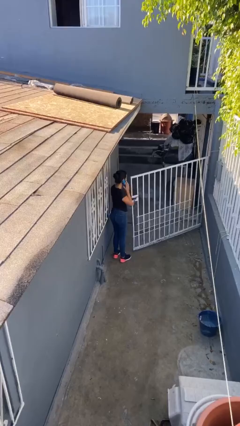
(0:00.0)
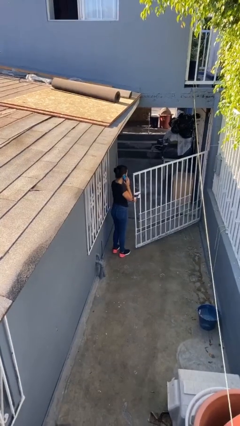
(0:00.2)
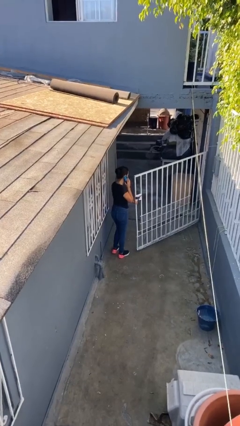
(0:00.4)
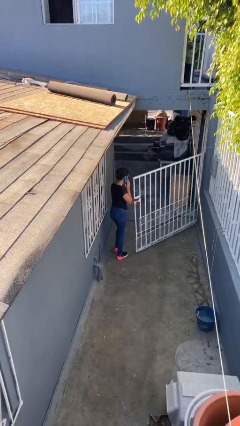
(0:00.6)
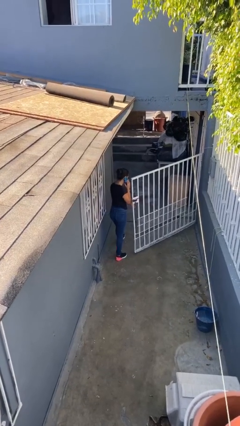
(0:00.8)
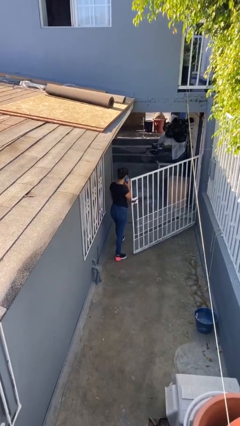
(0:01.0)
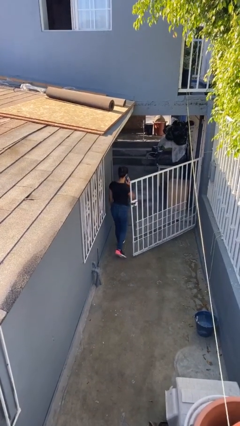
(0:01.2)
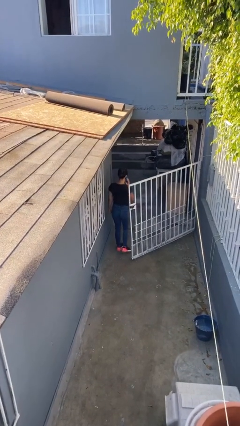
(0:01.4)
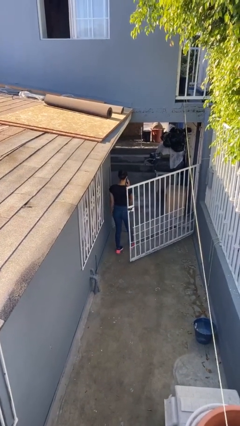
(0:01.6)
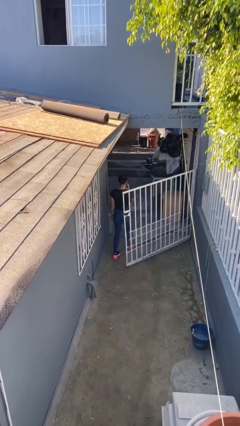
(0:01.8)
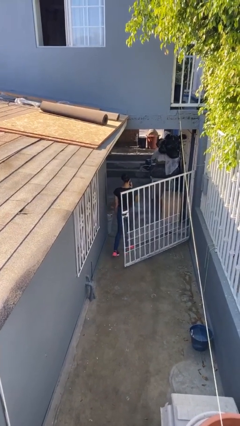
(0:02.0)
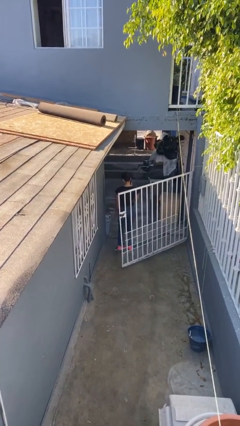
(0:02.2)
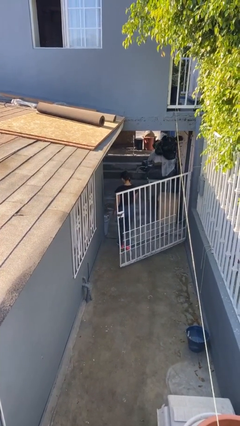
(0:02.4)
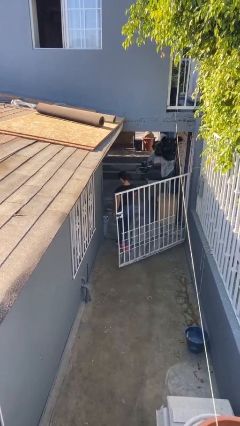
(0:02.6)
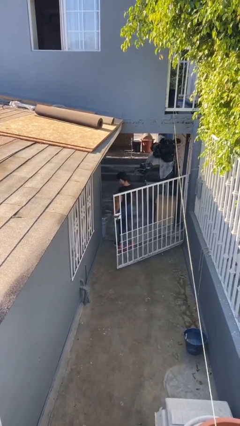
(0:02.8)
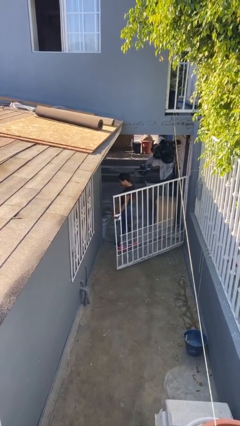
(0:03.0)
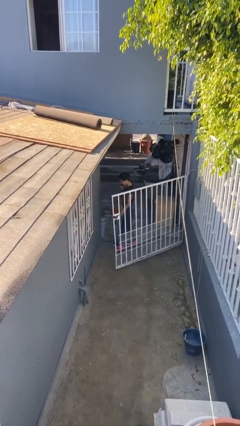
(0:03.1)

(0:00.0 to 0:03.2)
person exits scene through structure

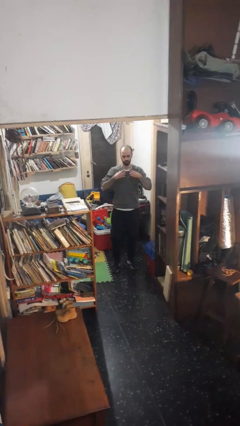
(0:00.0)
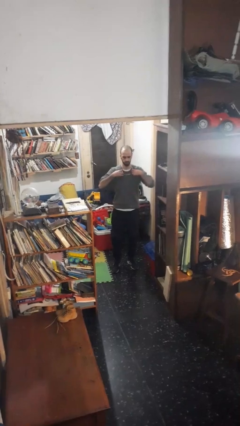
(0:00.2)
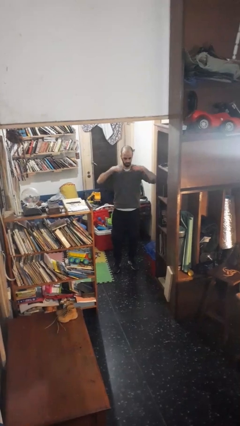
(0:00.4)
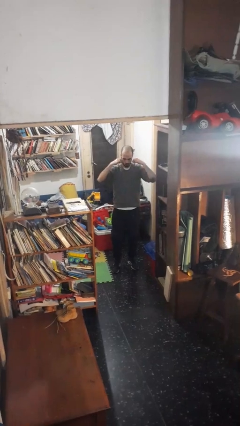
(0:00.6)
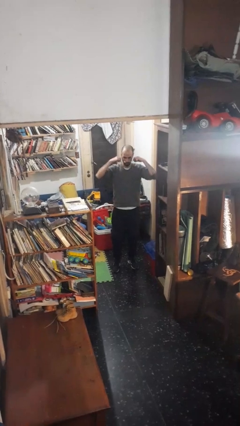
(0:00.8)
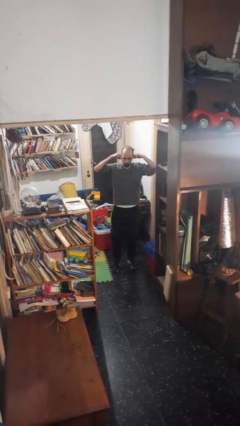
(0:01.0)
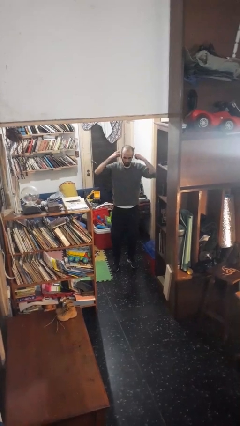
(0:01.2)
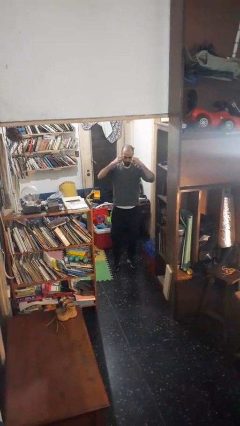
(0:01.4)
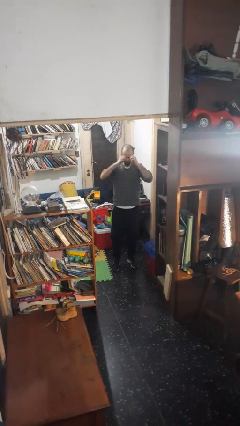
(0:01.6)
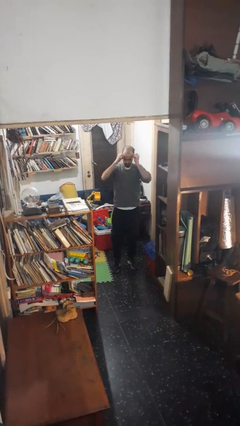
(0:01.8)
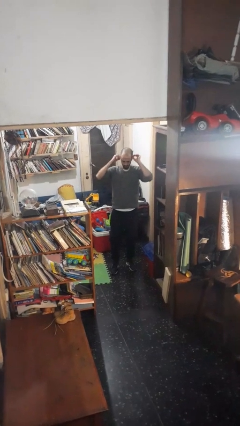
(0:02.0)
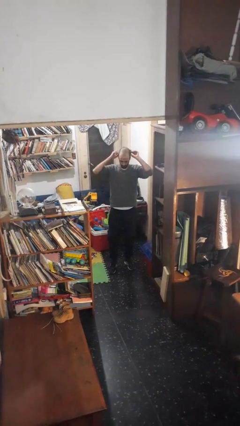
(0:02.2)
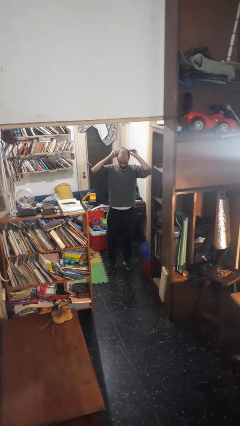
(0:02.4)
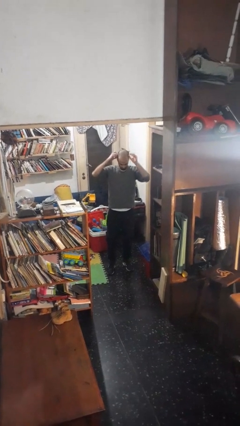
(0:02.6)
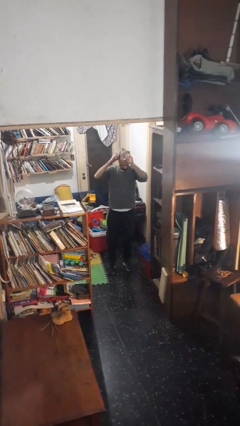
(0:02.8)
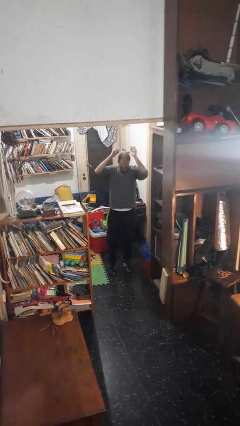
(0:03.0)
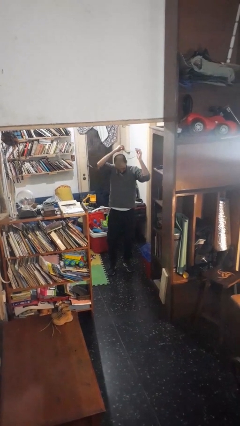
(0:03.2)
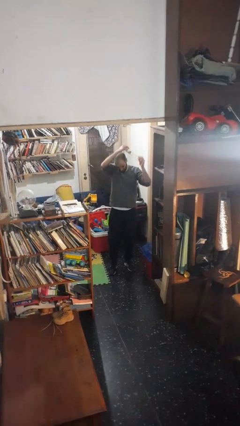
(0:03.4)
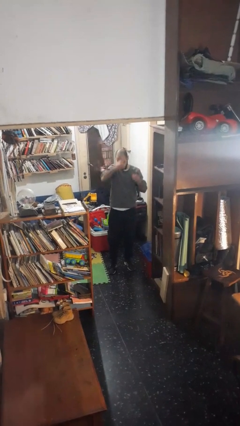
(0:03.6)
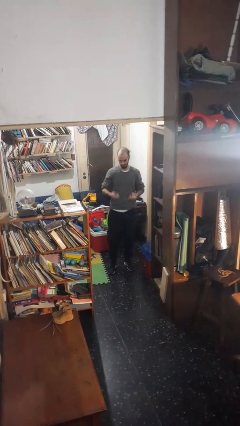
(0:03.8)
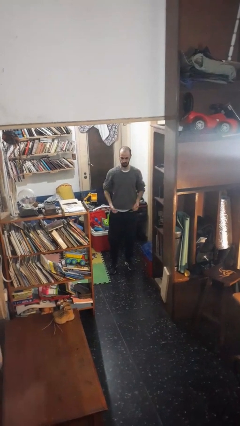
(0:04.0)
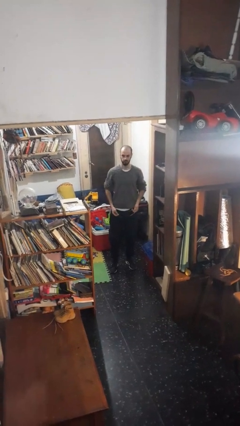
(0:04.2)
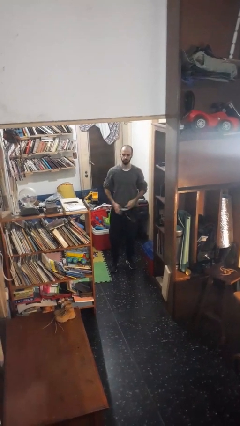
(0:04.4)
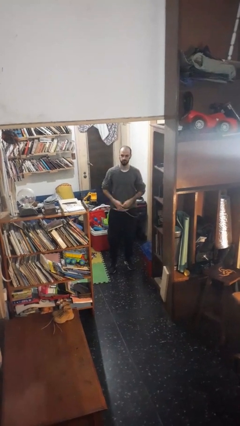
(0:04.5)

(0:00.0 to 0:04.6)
person takes off necklace

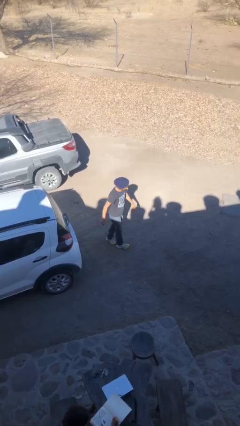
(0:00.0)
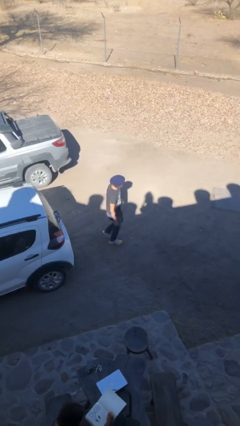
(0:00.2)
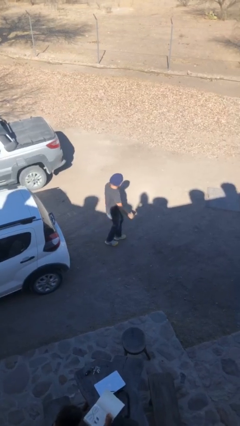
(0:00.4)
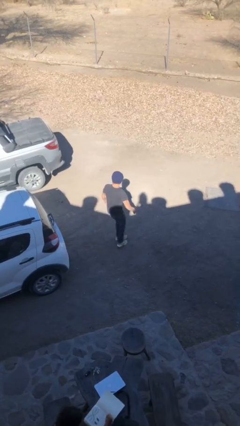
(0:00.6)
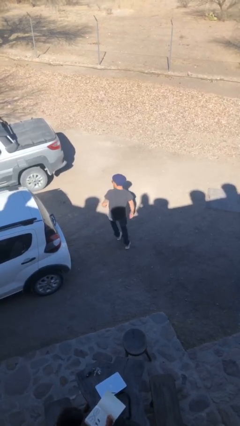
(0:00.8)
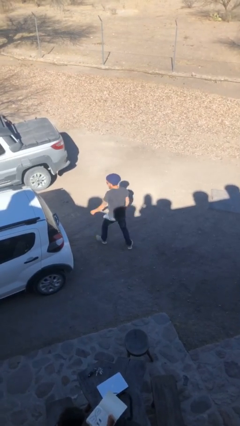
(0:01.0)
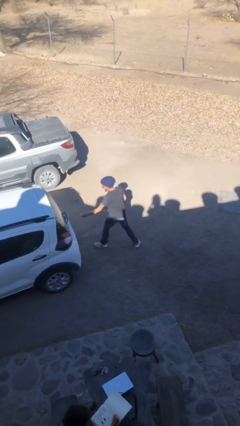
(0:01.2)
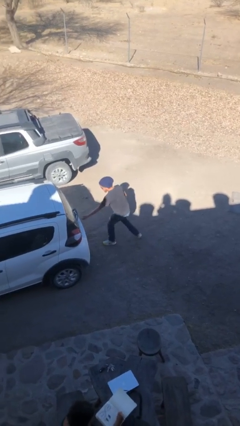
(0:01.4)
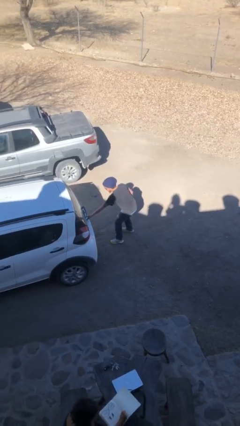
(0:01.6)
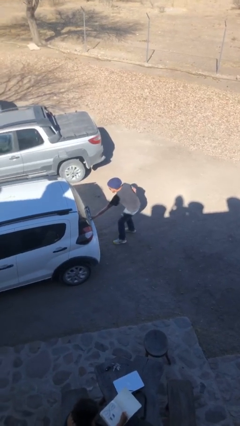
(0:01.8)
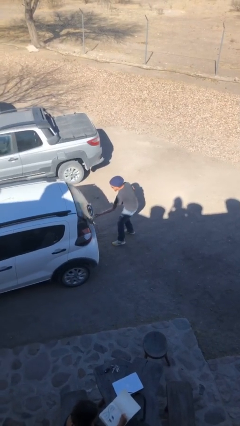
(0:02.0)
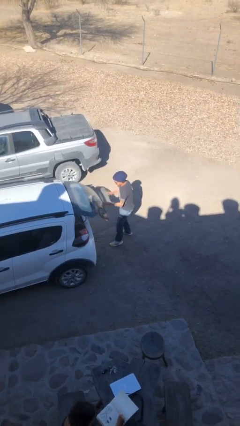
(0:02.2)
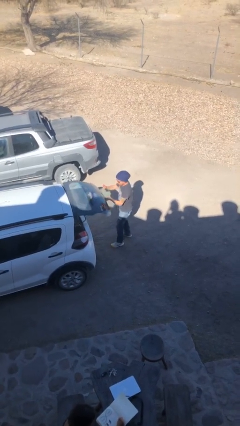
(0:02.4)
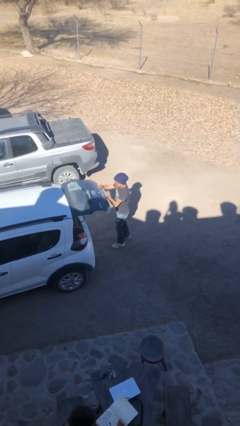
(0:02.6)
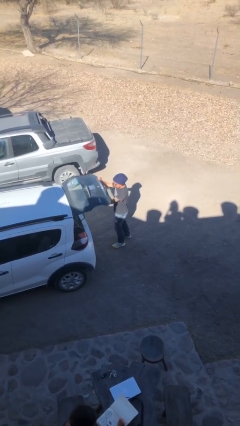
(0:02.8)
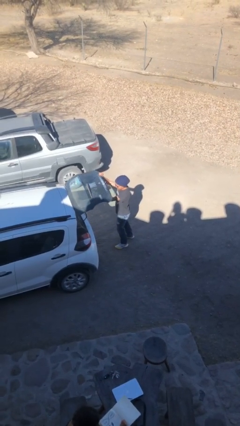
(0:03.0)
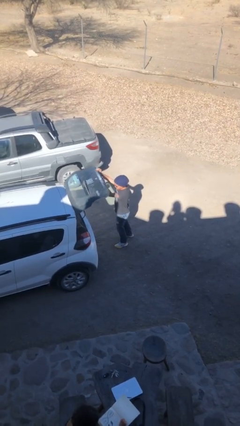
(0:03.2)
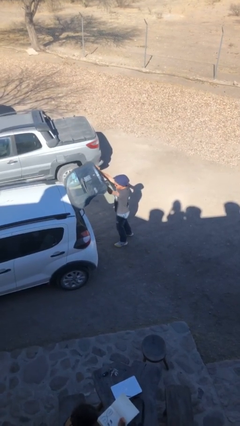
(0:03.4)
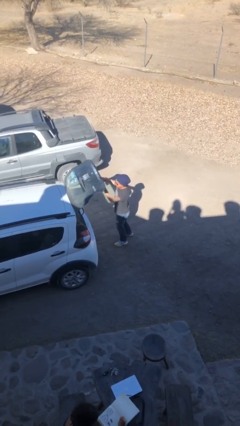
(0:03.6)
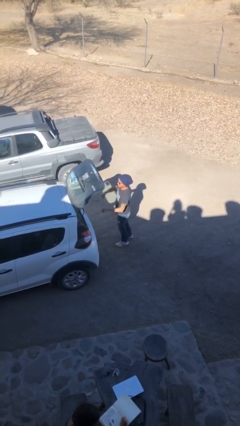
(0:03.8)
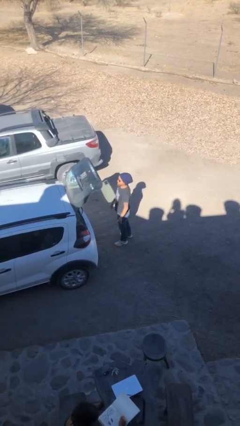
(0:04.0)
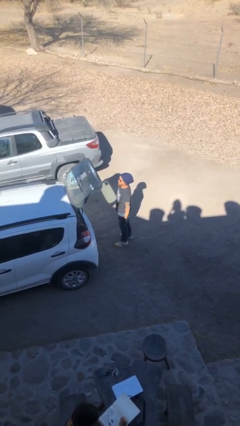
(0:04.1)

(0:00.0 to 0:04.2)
person opens car trunk

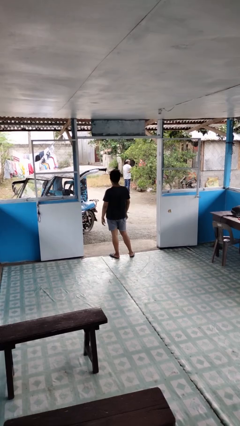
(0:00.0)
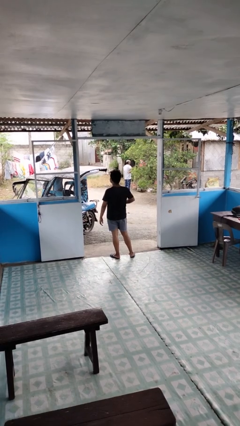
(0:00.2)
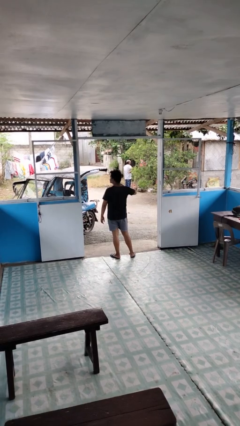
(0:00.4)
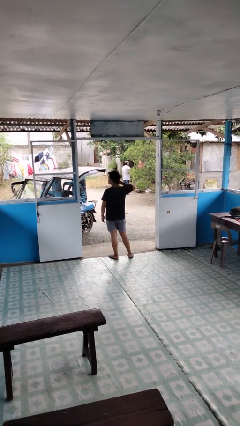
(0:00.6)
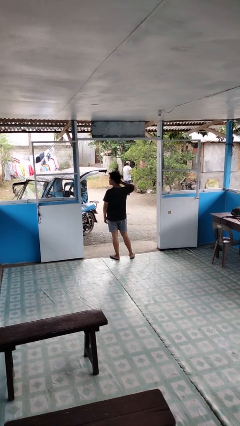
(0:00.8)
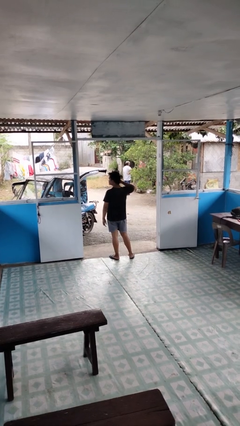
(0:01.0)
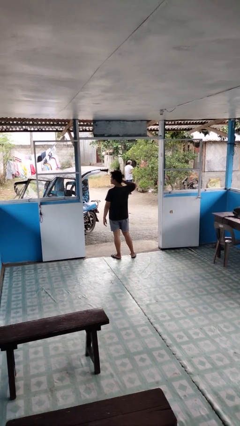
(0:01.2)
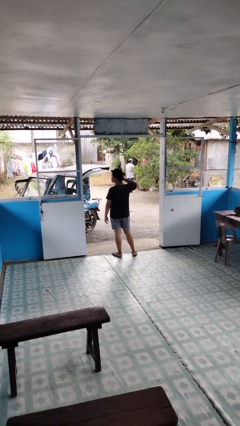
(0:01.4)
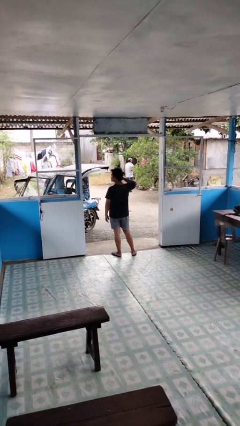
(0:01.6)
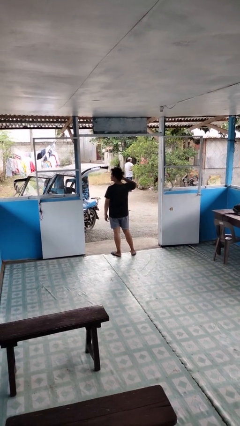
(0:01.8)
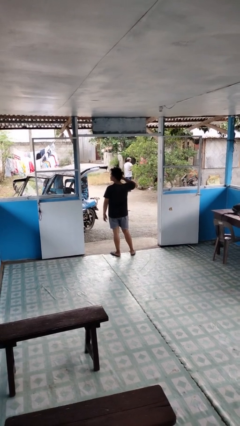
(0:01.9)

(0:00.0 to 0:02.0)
person touches earlobe

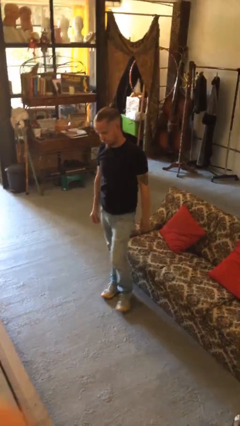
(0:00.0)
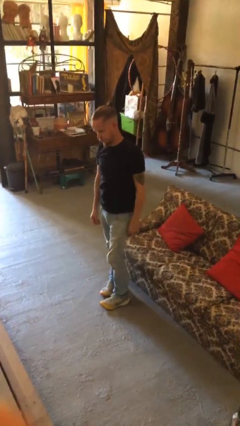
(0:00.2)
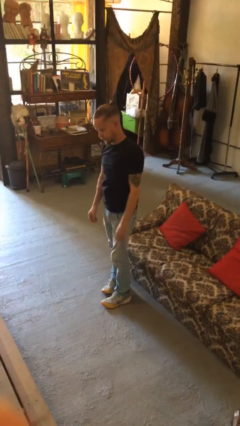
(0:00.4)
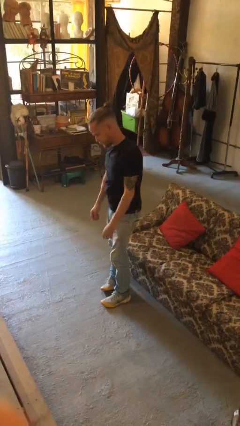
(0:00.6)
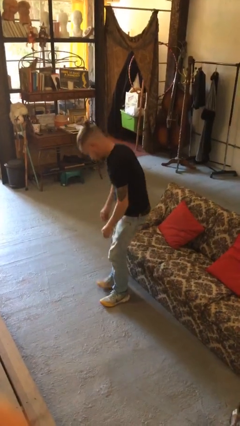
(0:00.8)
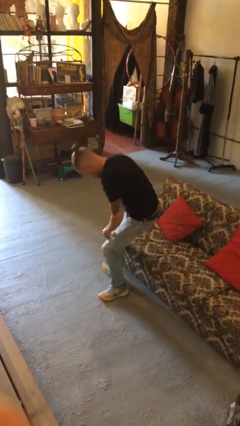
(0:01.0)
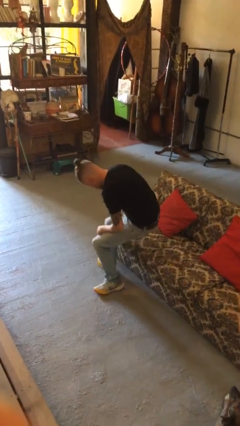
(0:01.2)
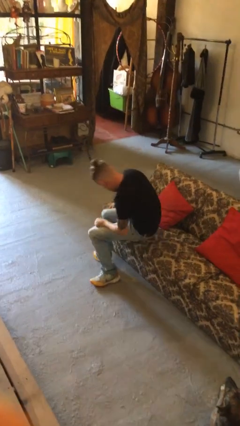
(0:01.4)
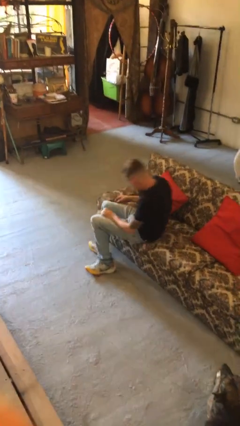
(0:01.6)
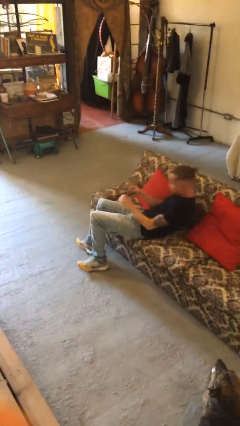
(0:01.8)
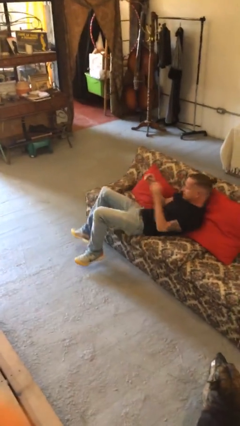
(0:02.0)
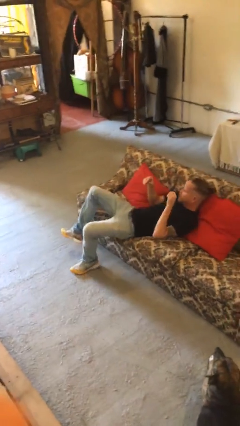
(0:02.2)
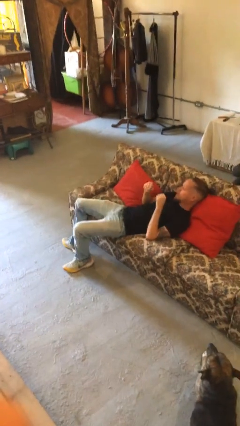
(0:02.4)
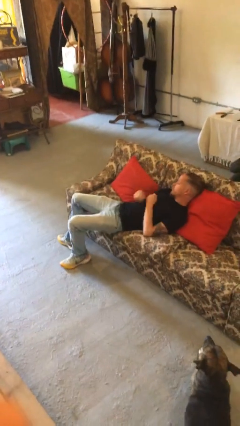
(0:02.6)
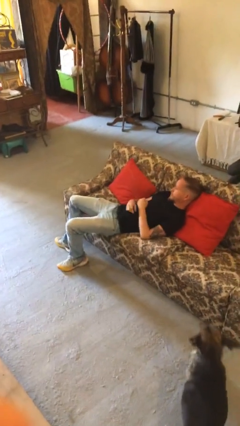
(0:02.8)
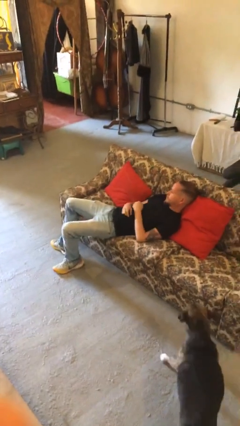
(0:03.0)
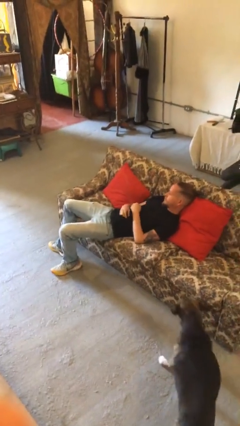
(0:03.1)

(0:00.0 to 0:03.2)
person lies down on couch

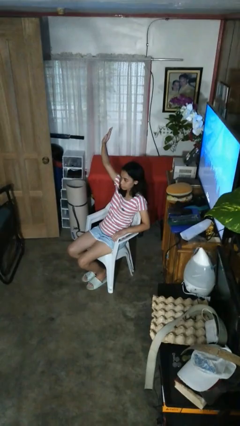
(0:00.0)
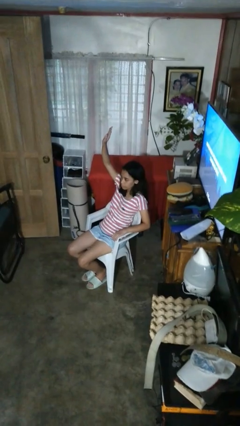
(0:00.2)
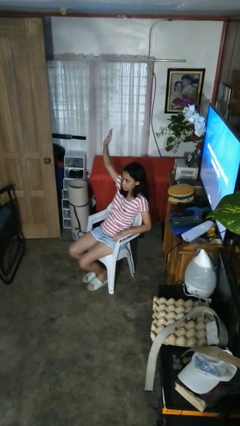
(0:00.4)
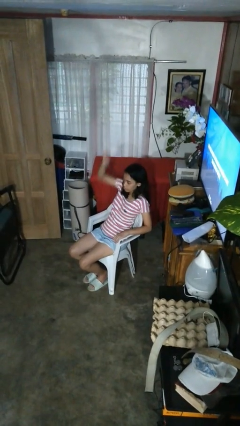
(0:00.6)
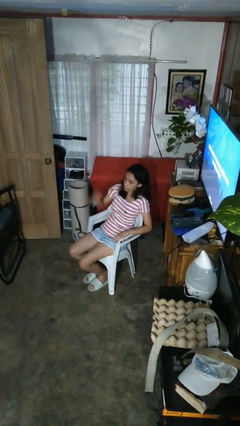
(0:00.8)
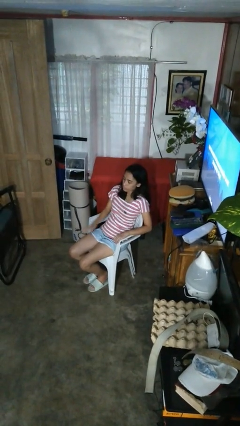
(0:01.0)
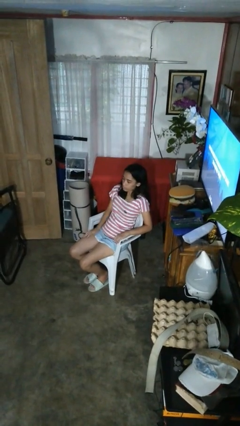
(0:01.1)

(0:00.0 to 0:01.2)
person gestures lower hand
